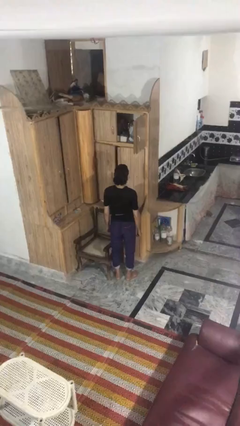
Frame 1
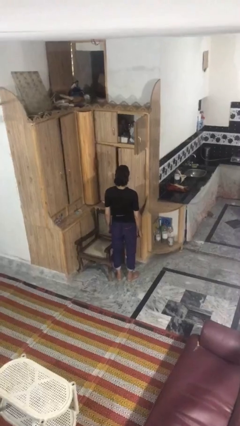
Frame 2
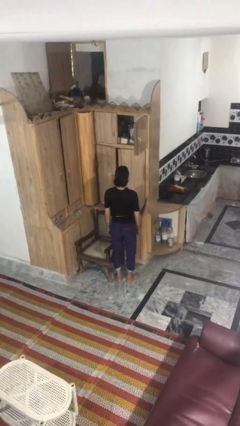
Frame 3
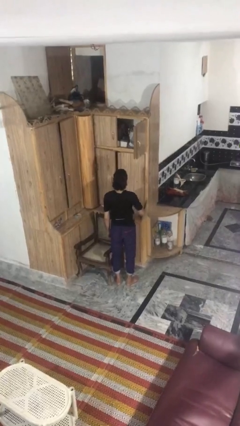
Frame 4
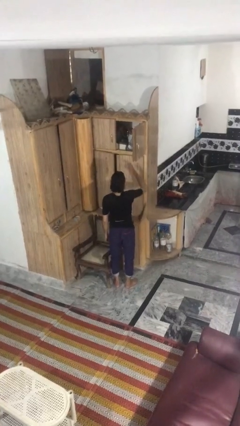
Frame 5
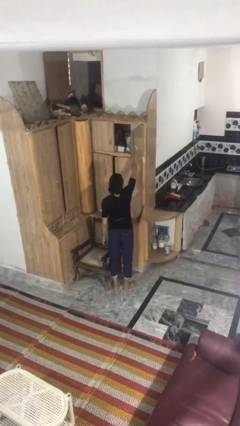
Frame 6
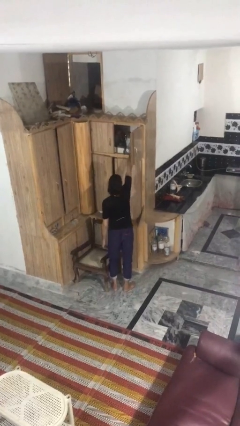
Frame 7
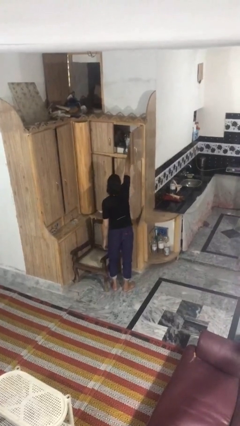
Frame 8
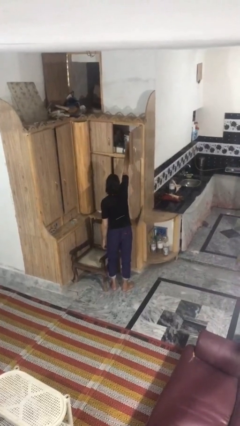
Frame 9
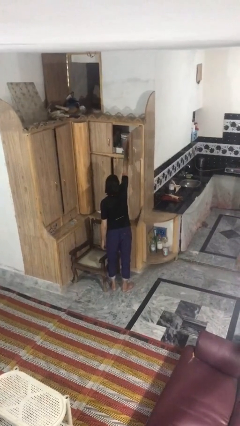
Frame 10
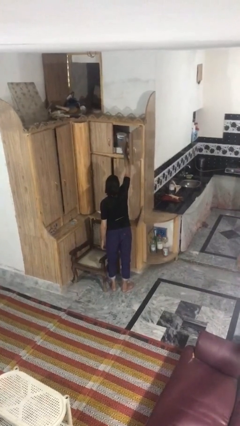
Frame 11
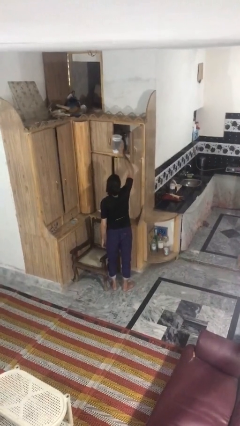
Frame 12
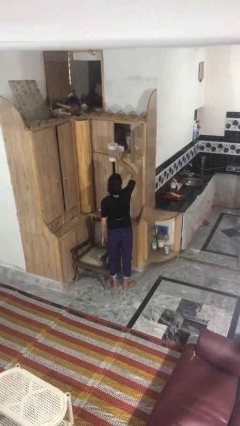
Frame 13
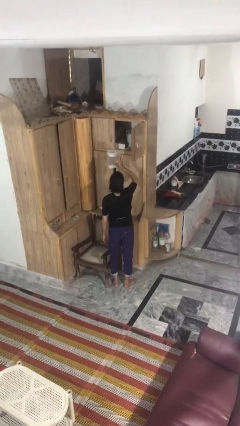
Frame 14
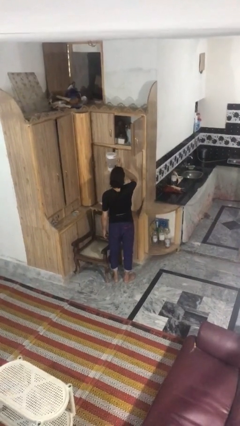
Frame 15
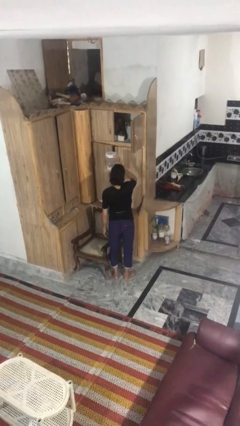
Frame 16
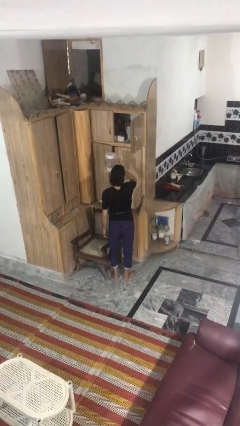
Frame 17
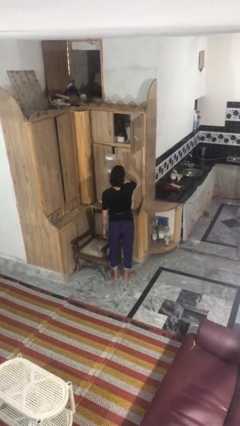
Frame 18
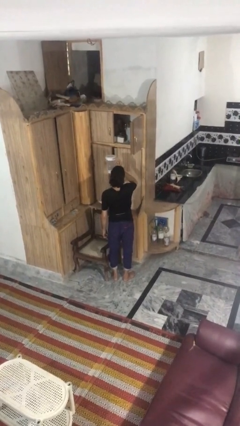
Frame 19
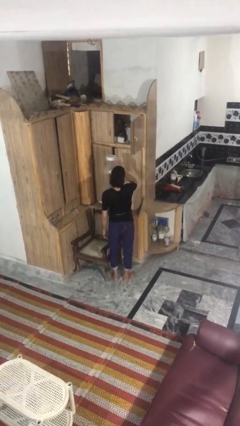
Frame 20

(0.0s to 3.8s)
person picks up object from shelf

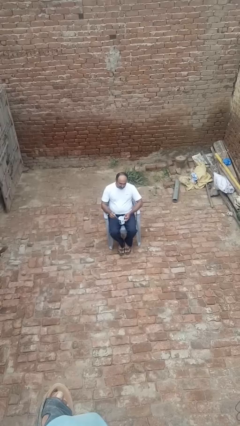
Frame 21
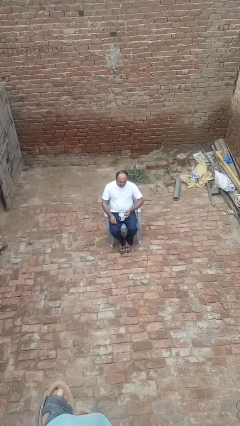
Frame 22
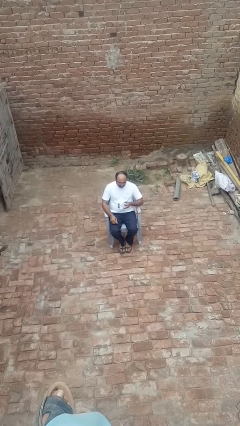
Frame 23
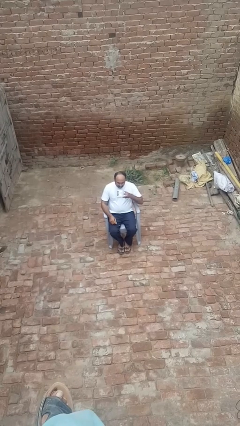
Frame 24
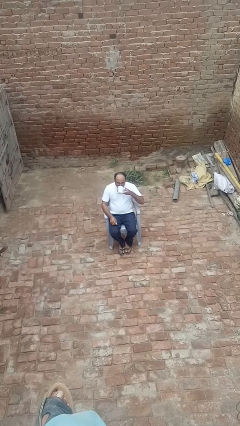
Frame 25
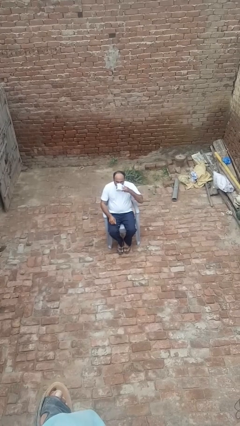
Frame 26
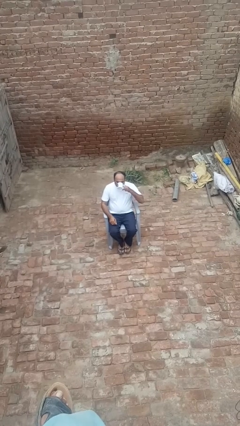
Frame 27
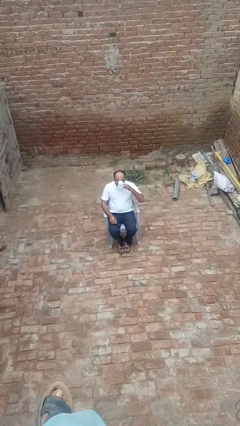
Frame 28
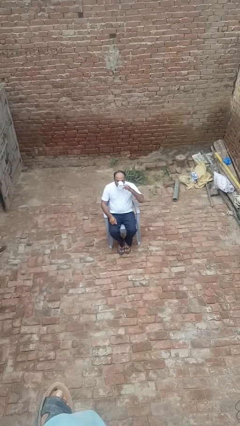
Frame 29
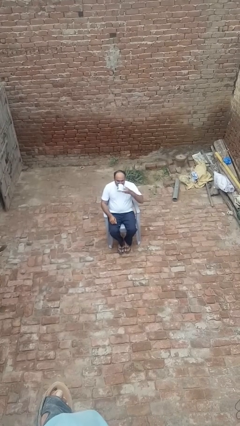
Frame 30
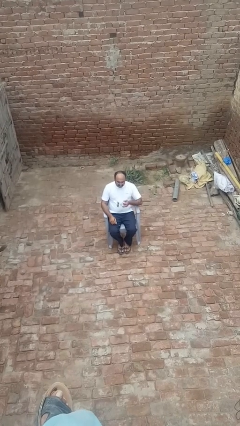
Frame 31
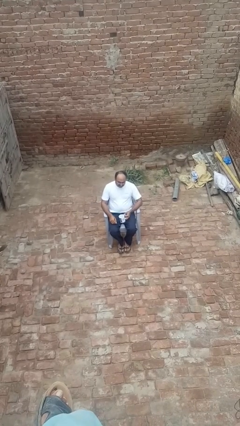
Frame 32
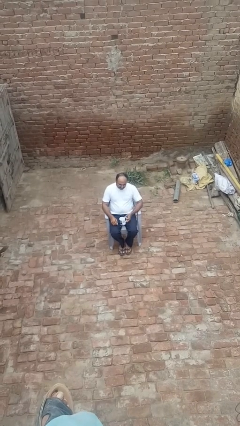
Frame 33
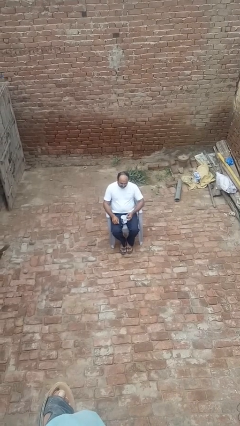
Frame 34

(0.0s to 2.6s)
person drinks from mug

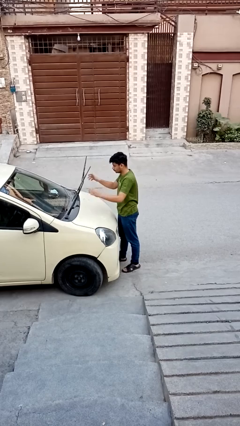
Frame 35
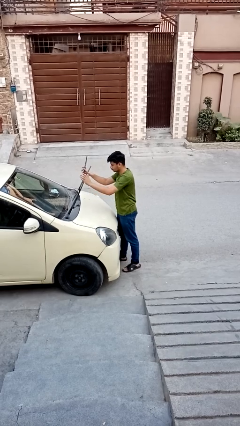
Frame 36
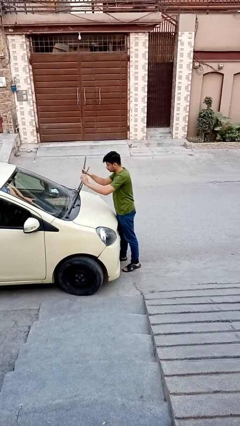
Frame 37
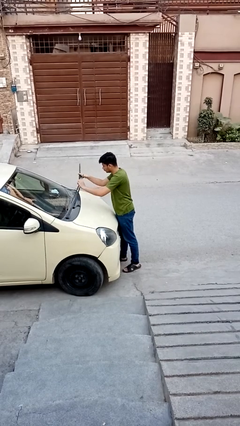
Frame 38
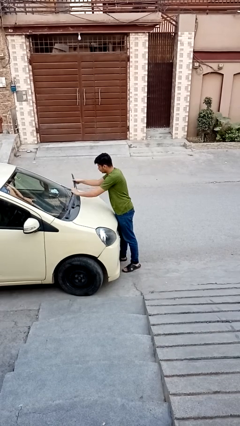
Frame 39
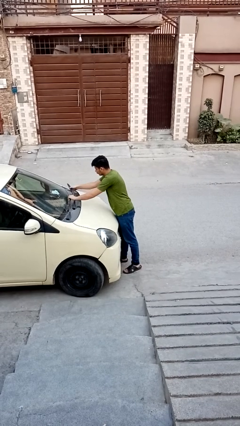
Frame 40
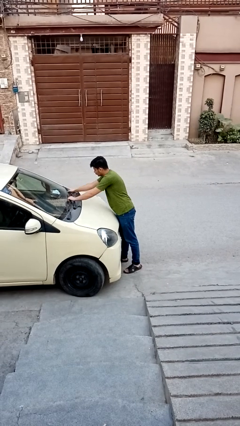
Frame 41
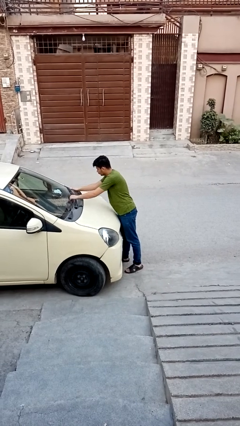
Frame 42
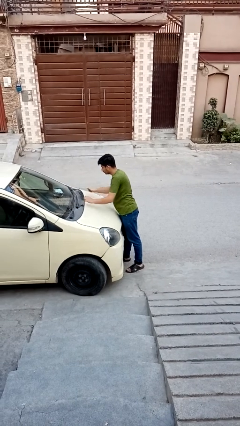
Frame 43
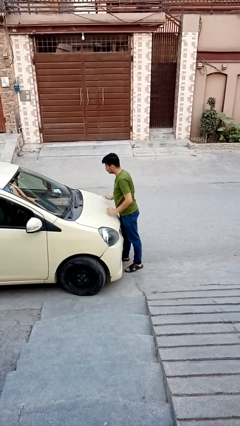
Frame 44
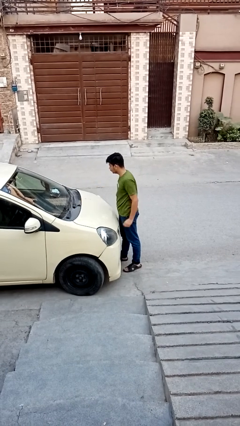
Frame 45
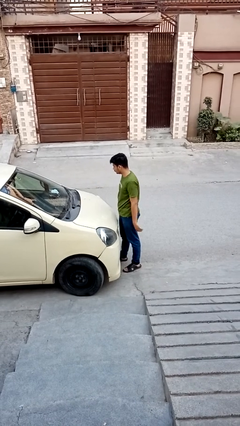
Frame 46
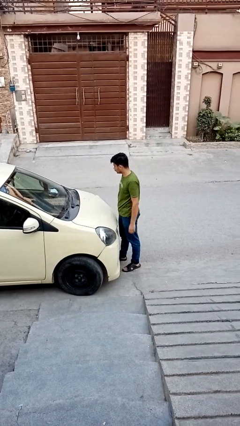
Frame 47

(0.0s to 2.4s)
person flips down car wipers

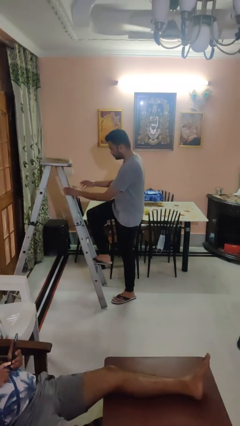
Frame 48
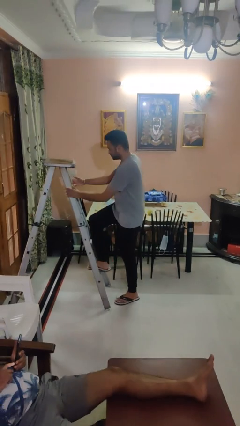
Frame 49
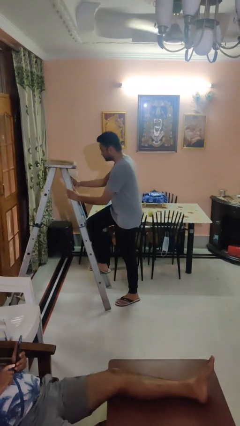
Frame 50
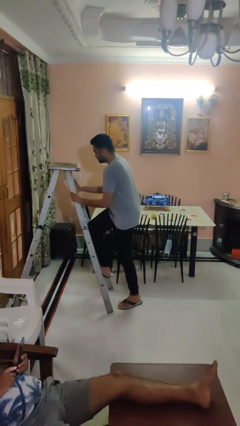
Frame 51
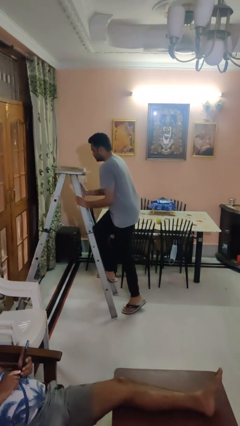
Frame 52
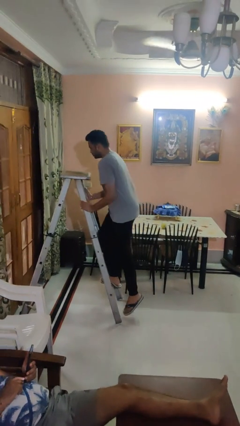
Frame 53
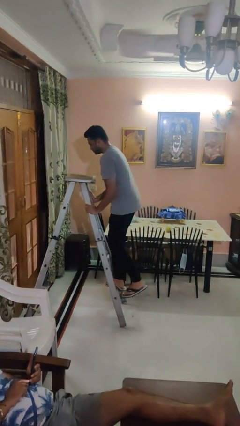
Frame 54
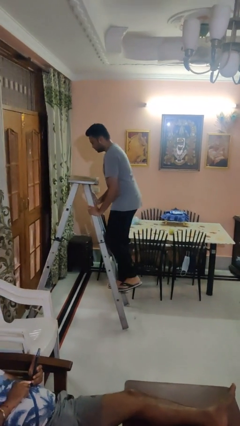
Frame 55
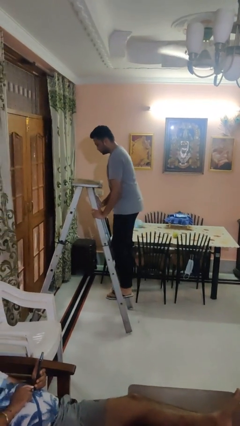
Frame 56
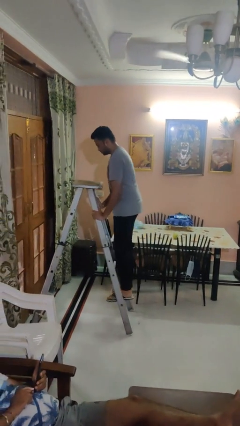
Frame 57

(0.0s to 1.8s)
person climbs up ladder

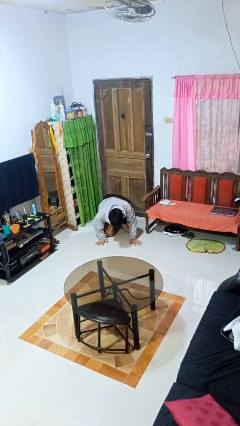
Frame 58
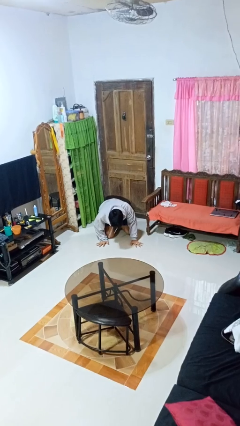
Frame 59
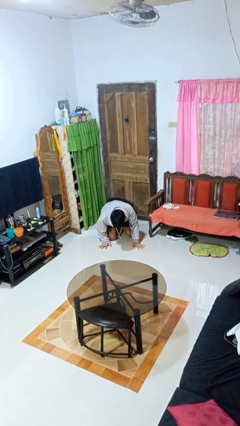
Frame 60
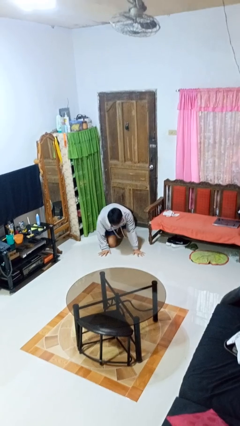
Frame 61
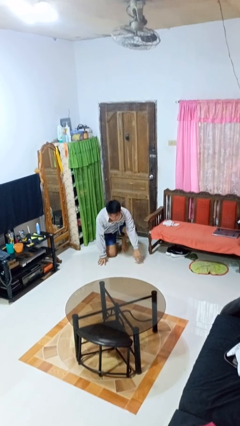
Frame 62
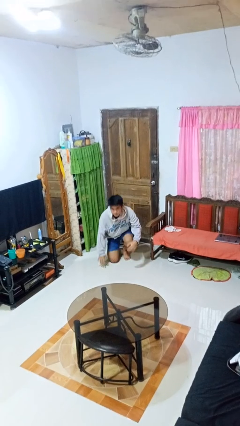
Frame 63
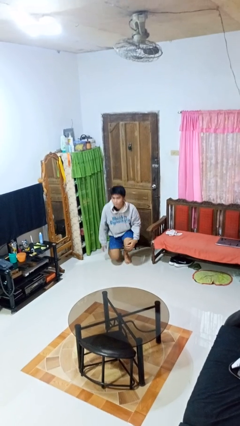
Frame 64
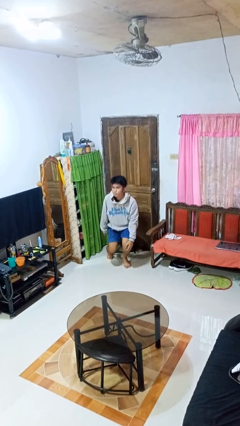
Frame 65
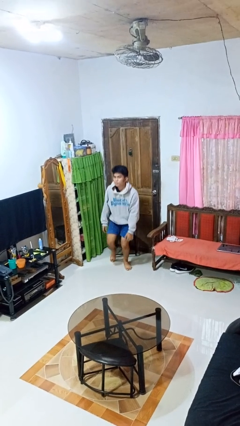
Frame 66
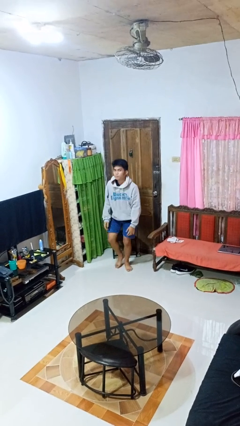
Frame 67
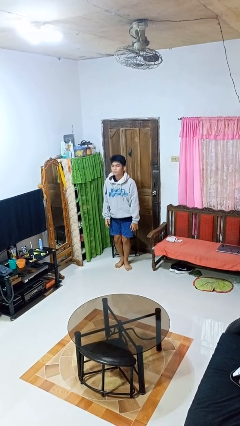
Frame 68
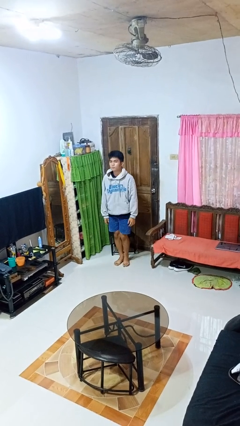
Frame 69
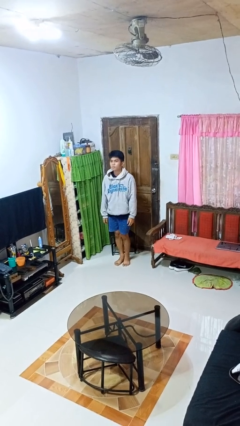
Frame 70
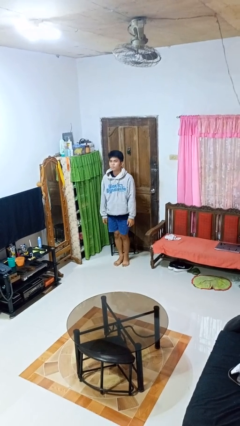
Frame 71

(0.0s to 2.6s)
person stands up from floor

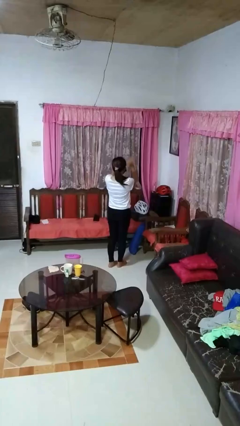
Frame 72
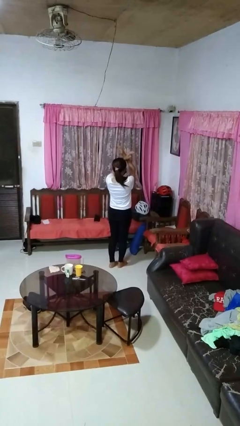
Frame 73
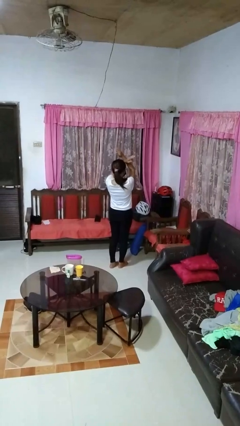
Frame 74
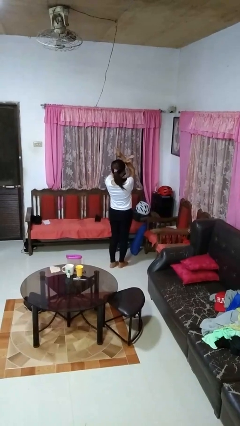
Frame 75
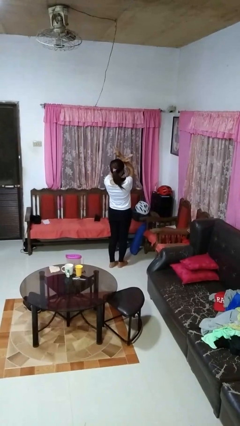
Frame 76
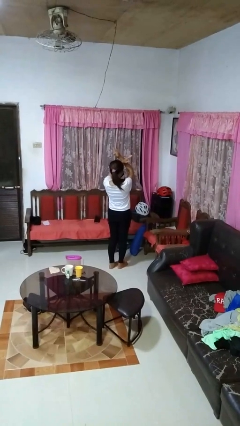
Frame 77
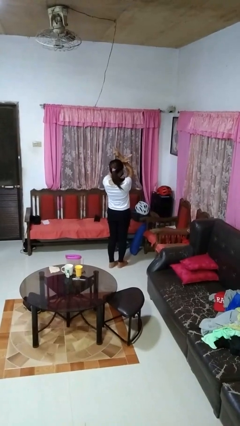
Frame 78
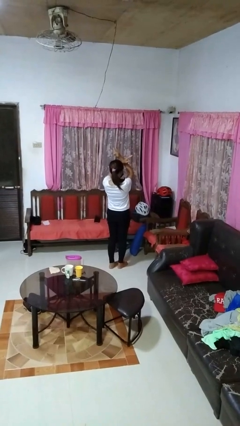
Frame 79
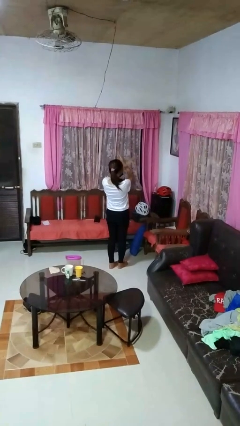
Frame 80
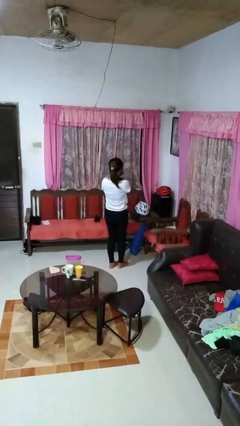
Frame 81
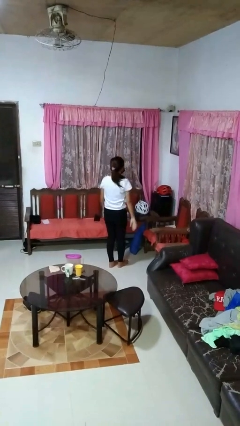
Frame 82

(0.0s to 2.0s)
person gestures arms x

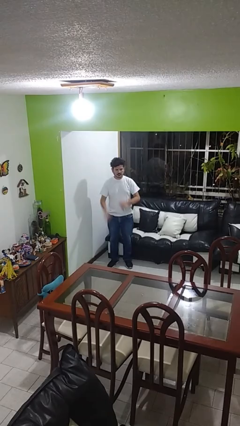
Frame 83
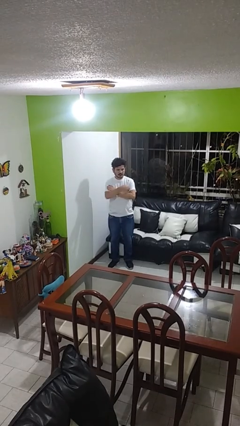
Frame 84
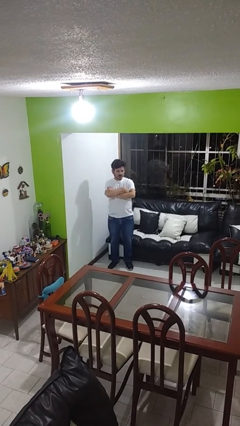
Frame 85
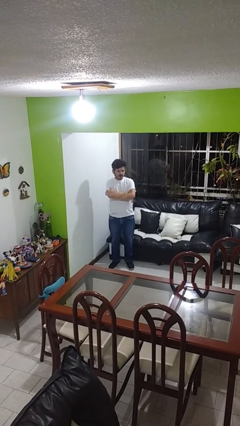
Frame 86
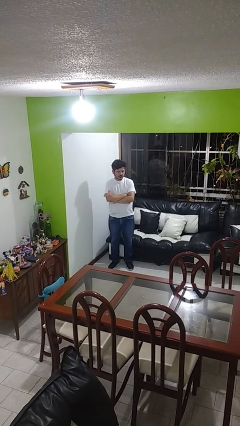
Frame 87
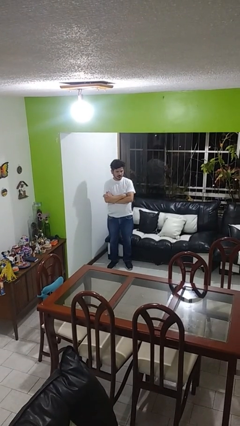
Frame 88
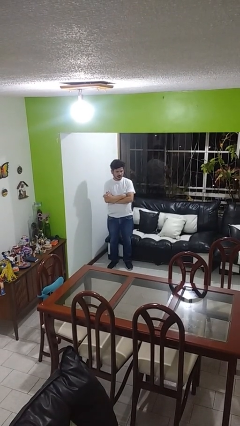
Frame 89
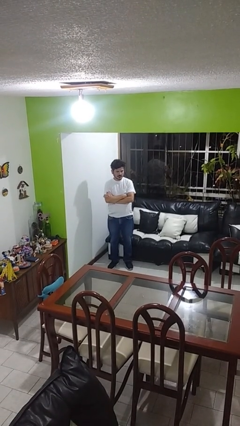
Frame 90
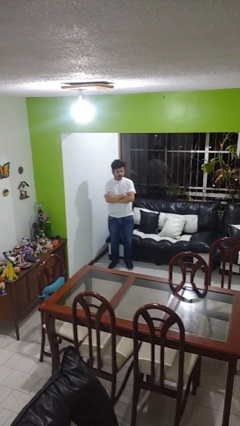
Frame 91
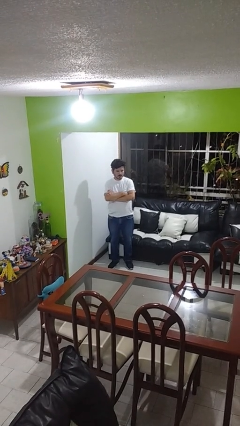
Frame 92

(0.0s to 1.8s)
person crosses arms
